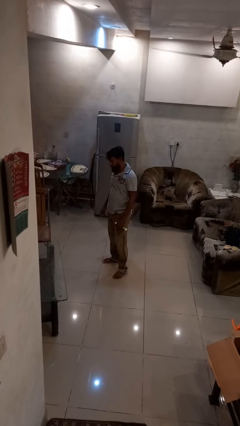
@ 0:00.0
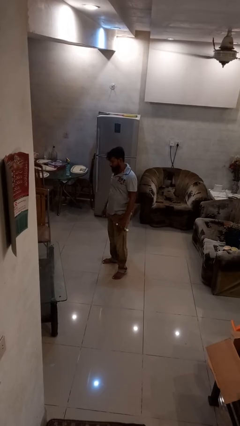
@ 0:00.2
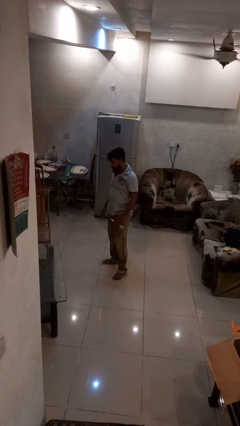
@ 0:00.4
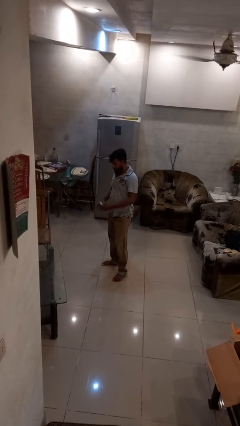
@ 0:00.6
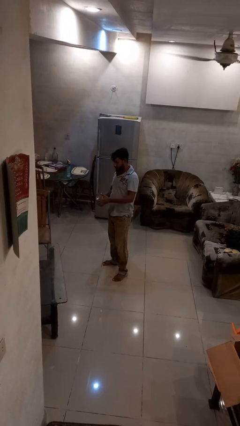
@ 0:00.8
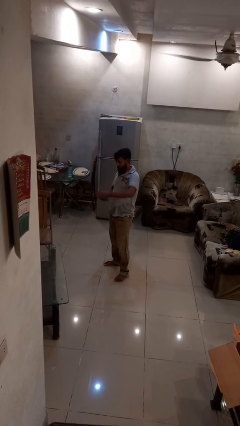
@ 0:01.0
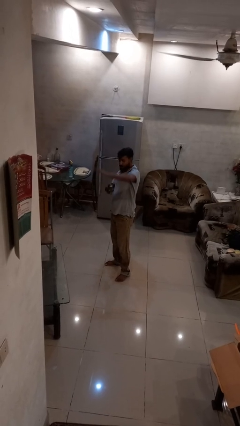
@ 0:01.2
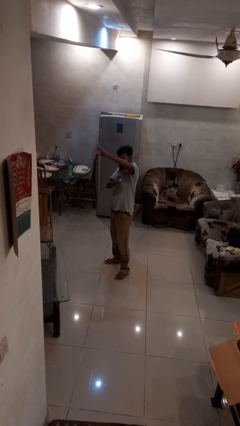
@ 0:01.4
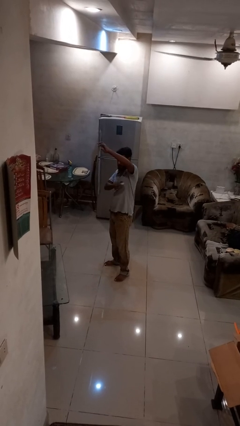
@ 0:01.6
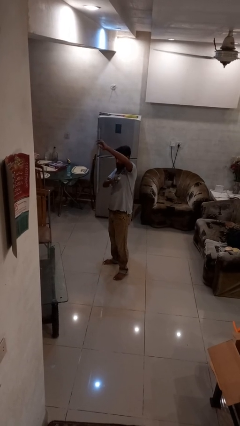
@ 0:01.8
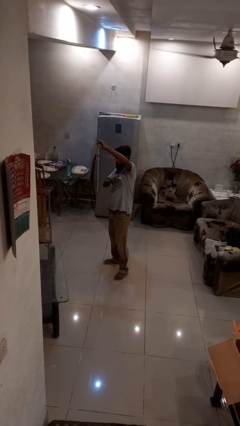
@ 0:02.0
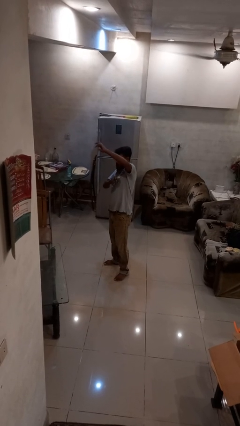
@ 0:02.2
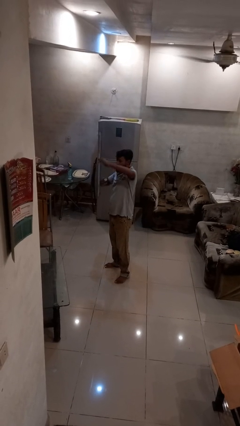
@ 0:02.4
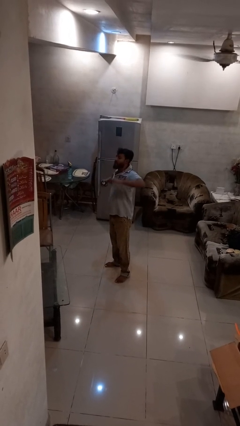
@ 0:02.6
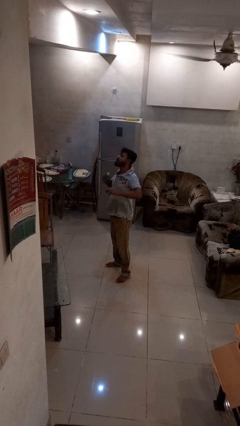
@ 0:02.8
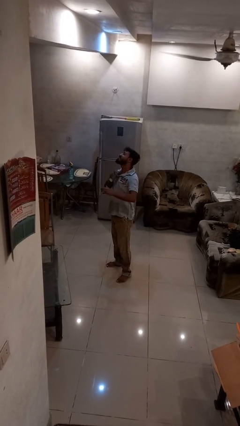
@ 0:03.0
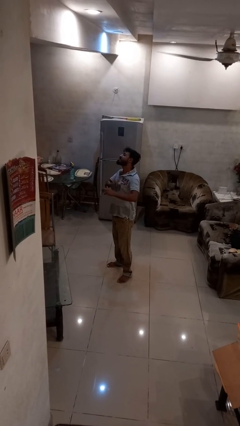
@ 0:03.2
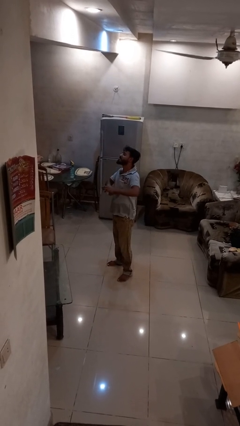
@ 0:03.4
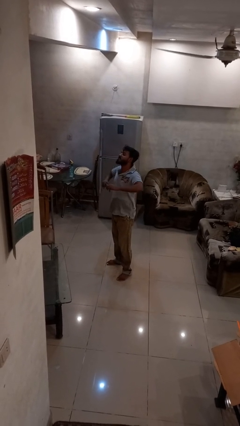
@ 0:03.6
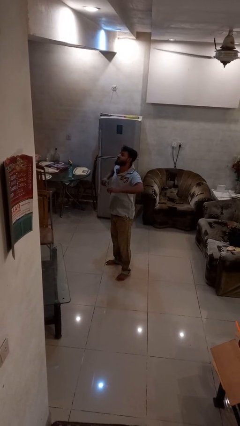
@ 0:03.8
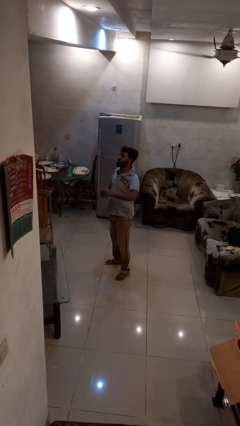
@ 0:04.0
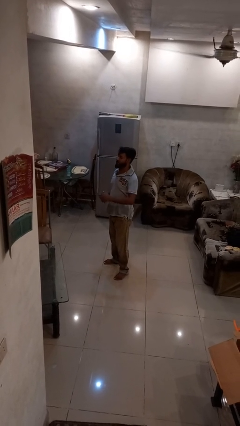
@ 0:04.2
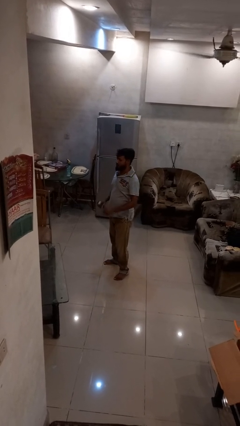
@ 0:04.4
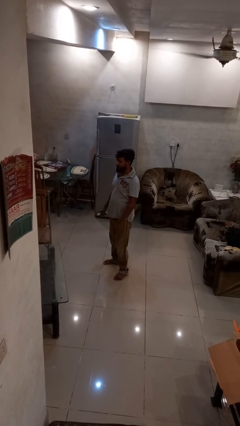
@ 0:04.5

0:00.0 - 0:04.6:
person applies deodorant

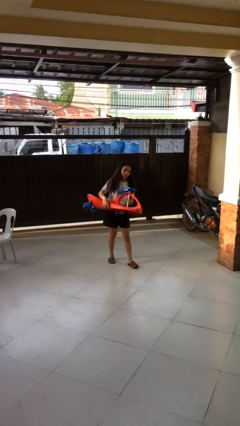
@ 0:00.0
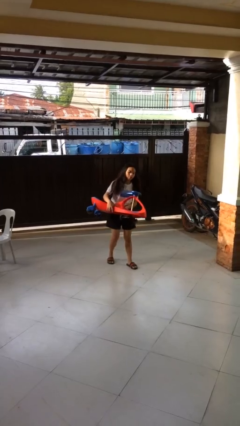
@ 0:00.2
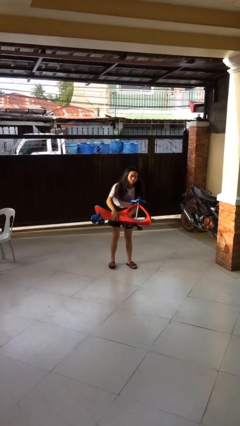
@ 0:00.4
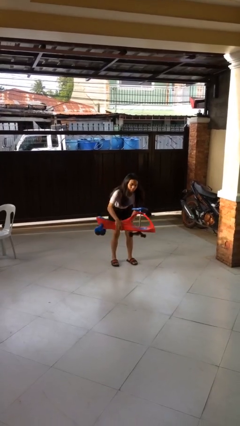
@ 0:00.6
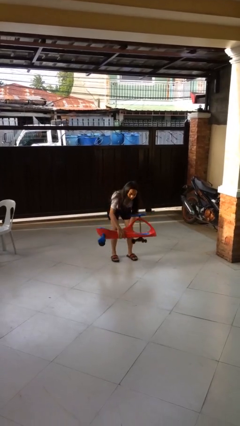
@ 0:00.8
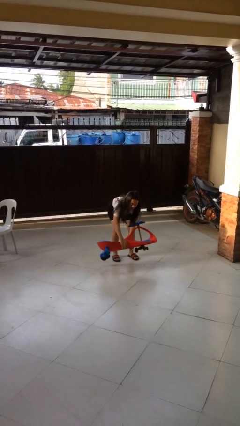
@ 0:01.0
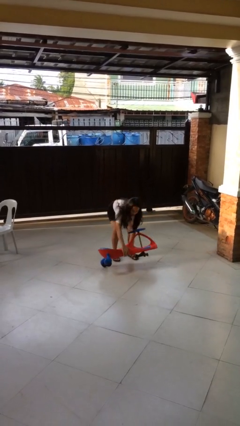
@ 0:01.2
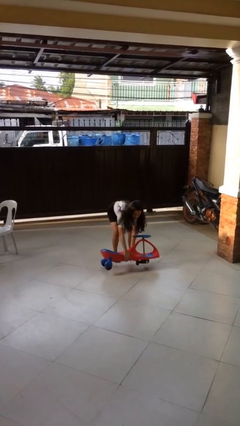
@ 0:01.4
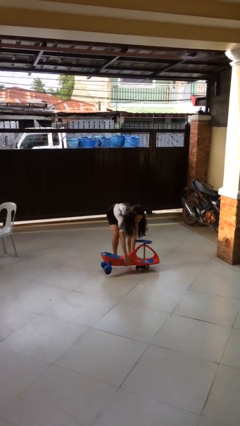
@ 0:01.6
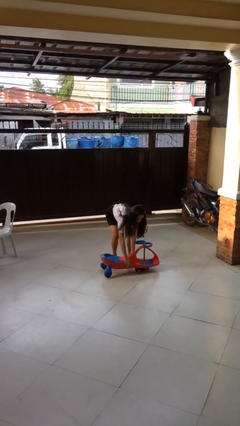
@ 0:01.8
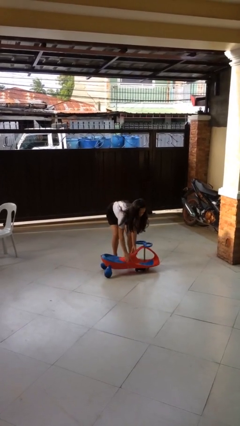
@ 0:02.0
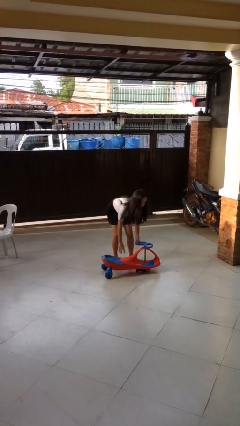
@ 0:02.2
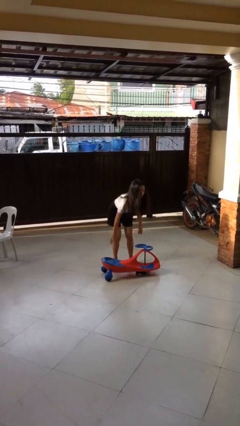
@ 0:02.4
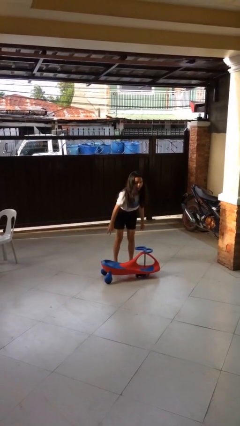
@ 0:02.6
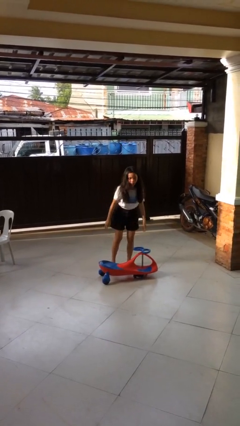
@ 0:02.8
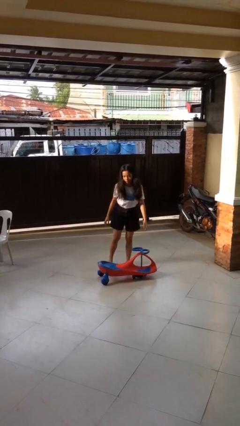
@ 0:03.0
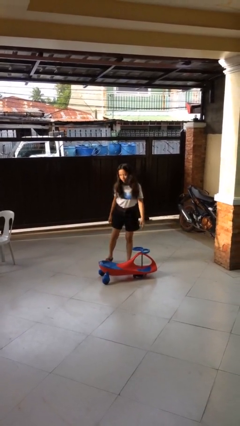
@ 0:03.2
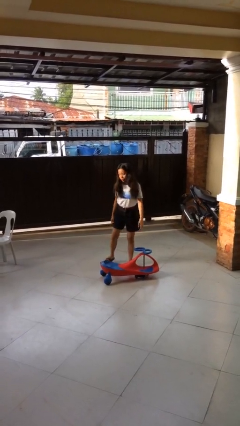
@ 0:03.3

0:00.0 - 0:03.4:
person puts down object on floor

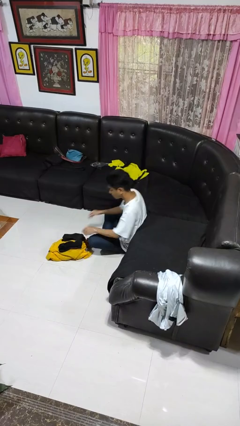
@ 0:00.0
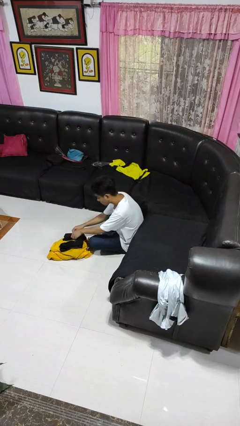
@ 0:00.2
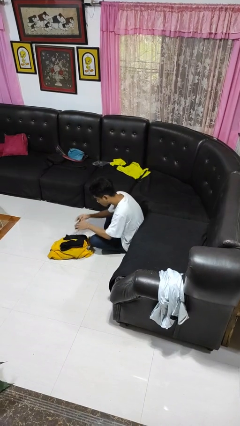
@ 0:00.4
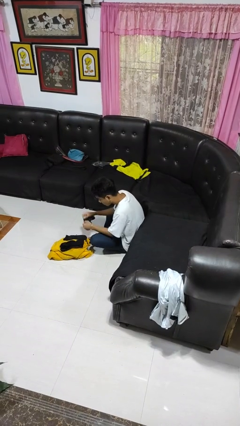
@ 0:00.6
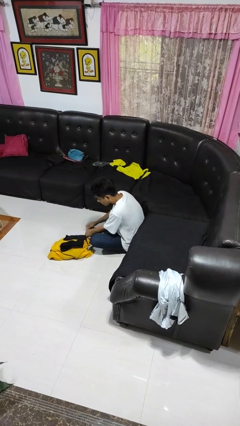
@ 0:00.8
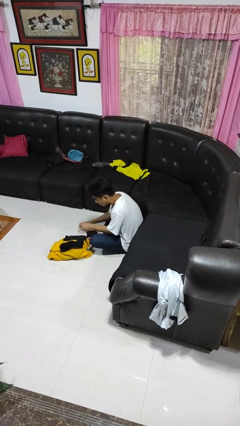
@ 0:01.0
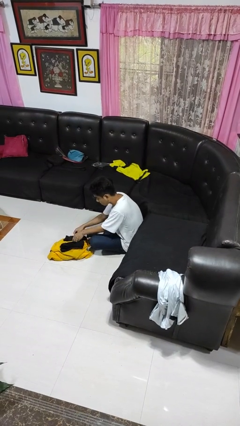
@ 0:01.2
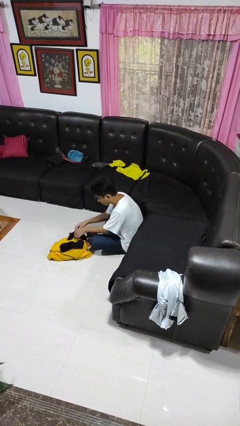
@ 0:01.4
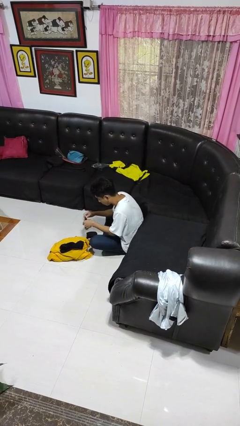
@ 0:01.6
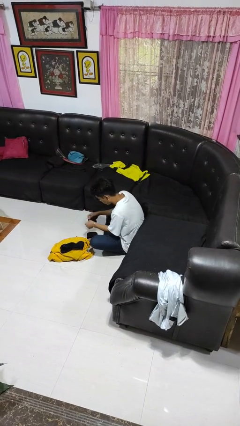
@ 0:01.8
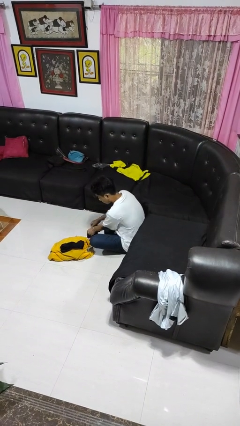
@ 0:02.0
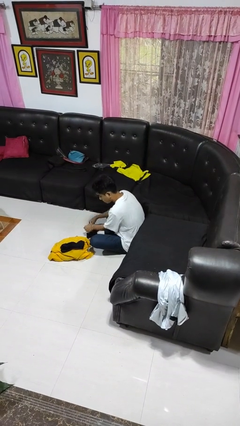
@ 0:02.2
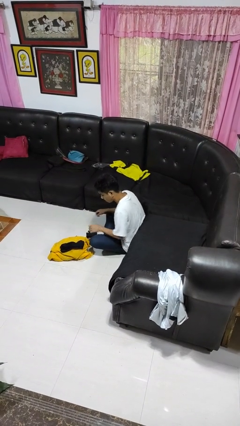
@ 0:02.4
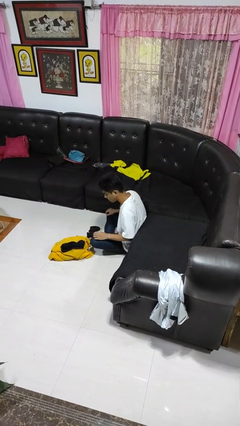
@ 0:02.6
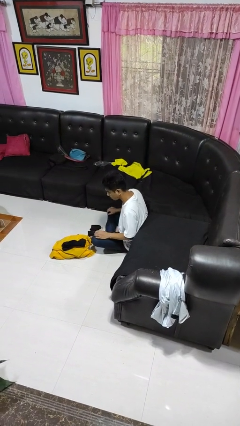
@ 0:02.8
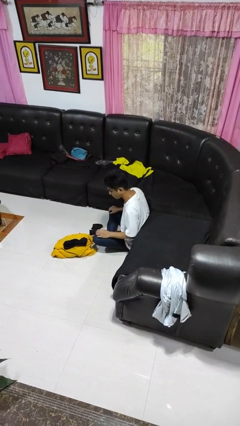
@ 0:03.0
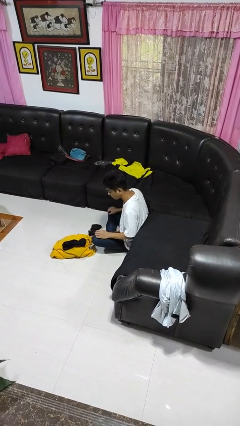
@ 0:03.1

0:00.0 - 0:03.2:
person folds socks

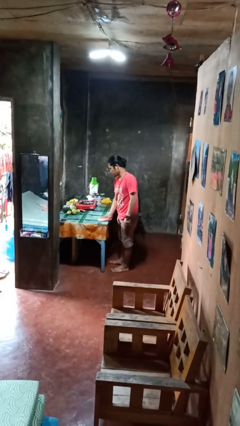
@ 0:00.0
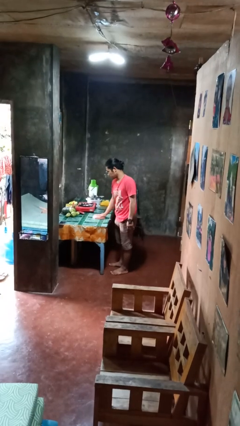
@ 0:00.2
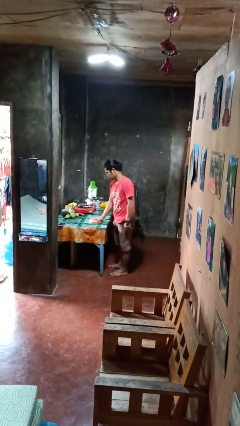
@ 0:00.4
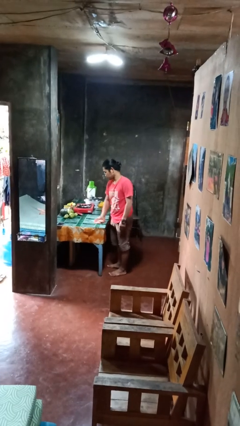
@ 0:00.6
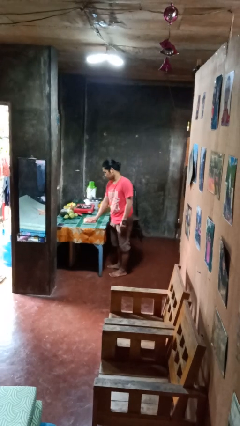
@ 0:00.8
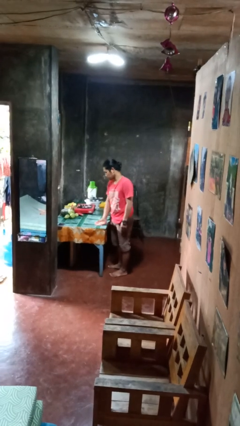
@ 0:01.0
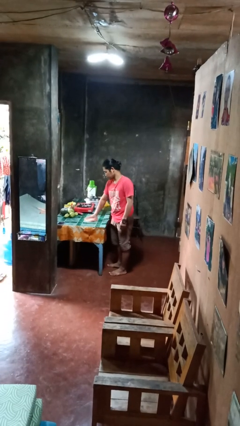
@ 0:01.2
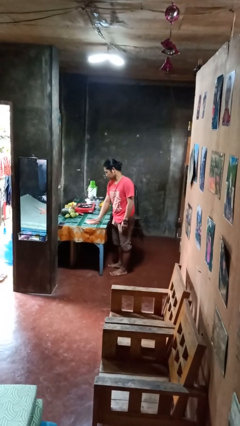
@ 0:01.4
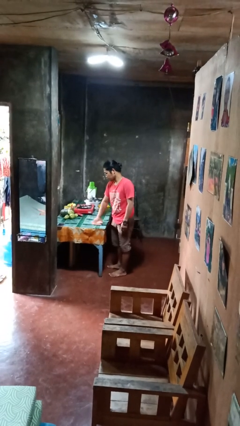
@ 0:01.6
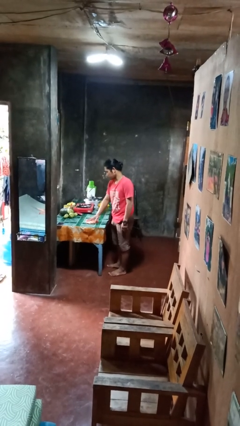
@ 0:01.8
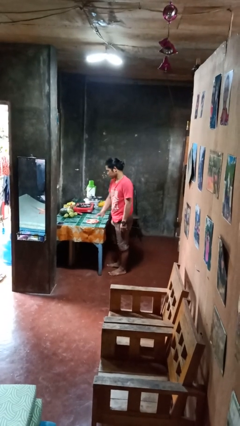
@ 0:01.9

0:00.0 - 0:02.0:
person cleans table with rag

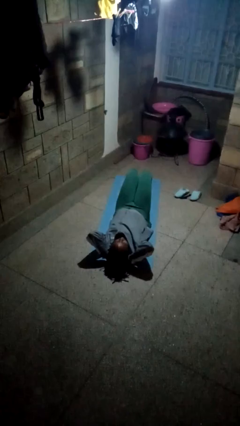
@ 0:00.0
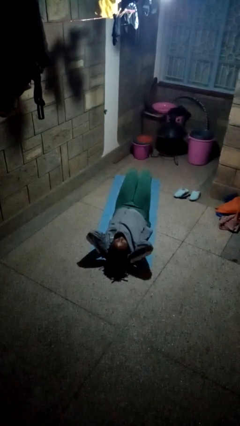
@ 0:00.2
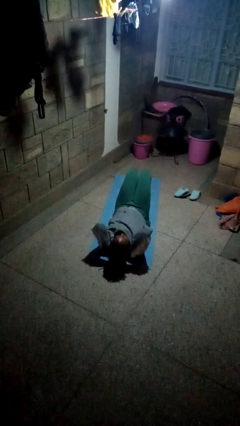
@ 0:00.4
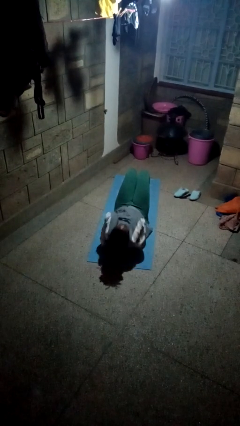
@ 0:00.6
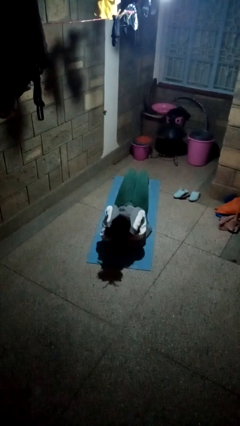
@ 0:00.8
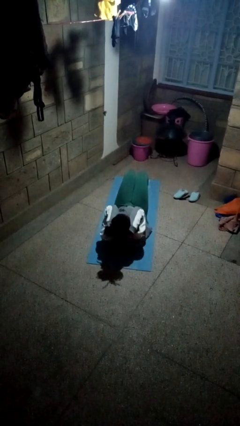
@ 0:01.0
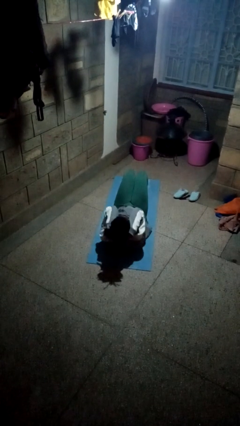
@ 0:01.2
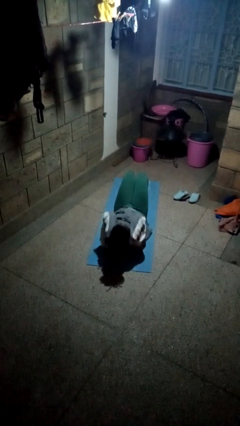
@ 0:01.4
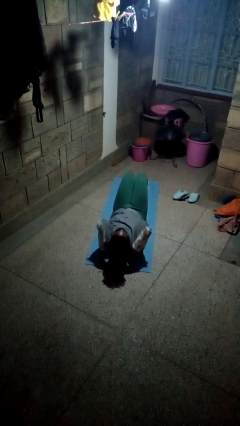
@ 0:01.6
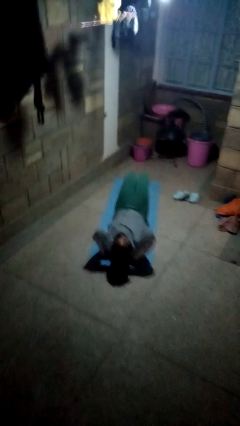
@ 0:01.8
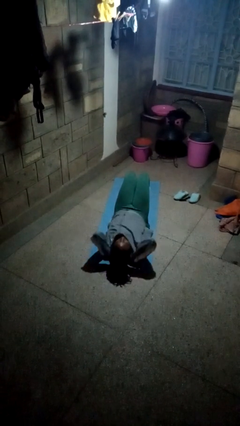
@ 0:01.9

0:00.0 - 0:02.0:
person exercises with situp

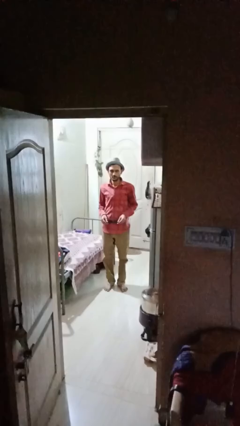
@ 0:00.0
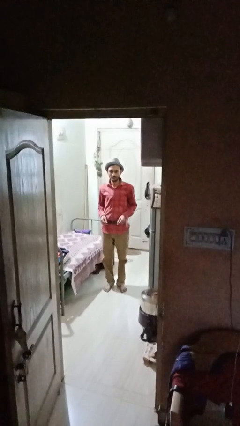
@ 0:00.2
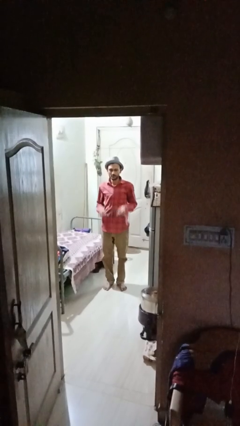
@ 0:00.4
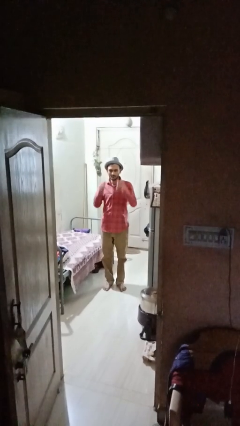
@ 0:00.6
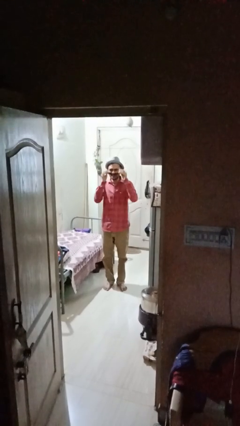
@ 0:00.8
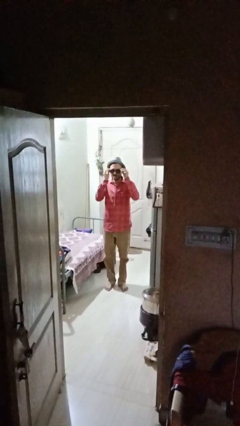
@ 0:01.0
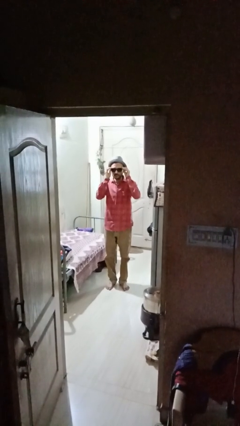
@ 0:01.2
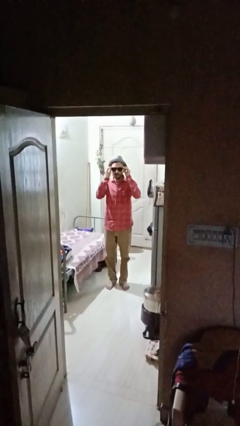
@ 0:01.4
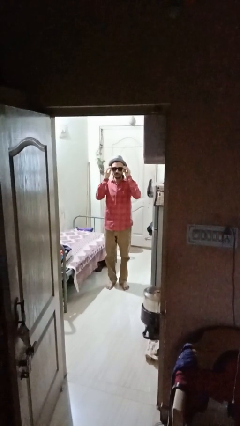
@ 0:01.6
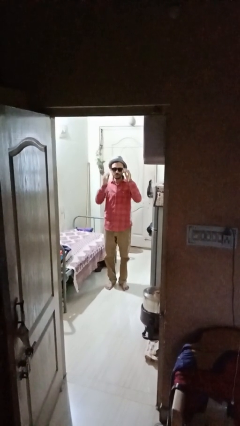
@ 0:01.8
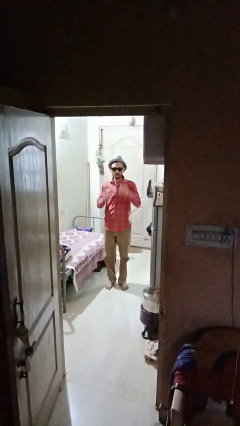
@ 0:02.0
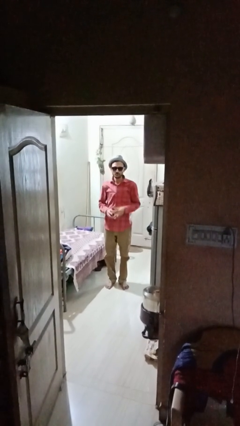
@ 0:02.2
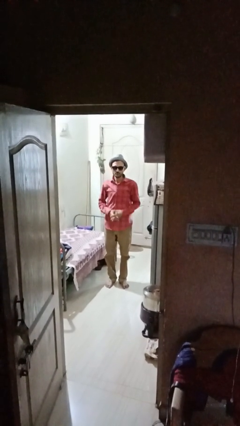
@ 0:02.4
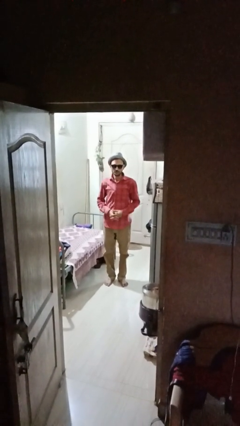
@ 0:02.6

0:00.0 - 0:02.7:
person puts on sunglasses
